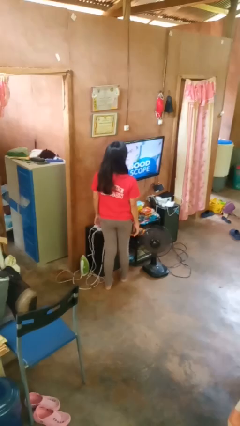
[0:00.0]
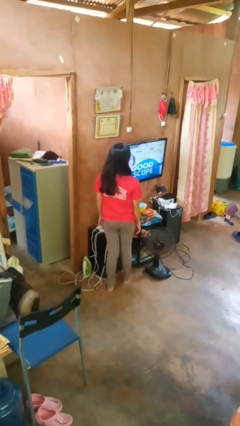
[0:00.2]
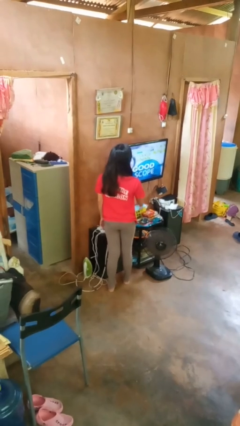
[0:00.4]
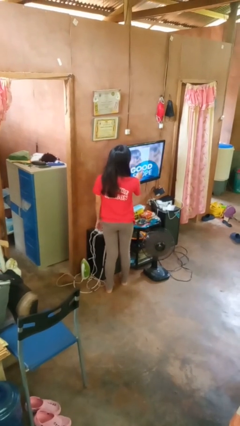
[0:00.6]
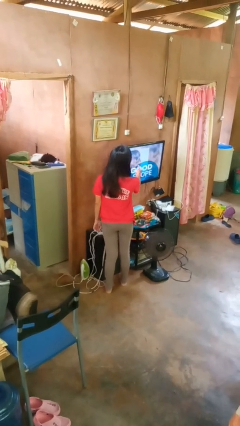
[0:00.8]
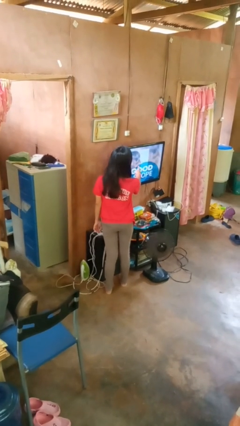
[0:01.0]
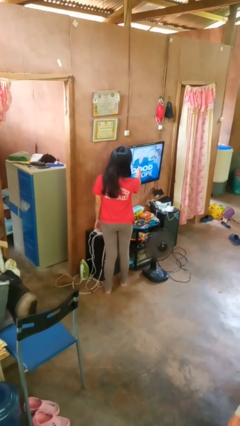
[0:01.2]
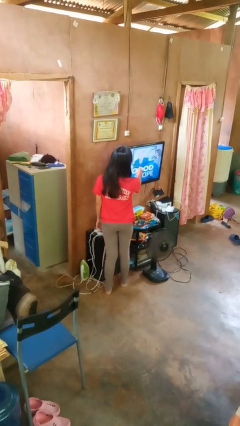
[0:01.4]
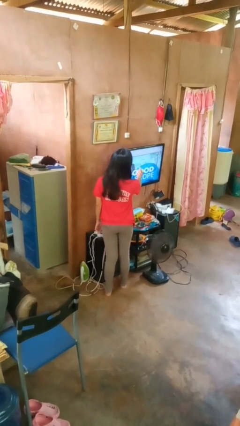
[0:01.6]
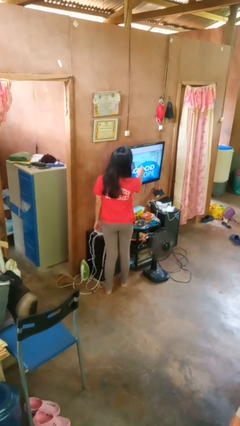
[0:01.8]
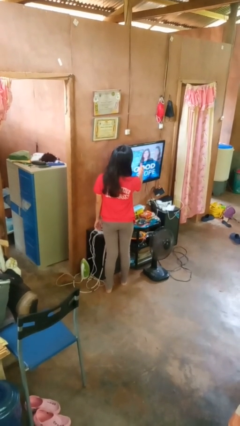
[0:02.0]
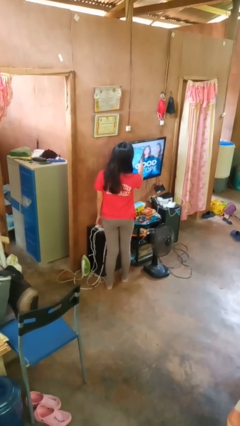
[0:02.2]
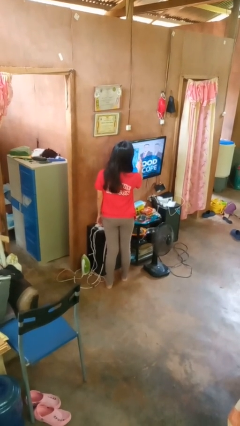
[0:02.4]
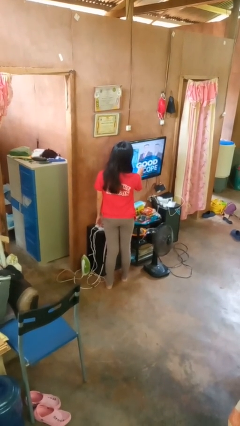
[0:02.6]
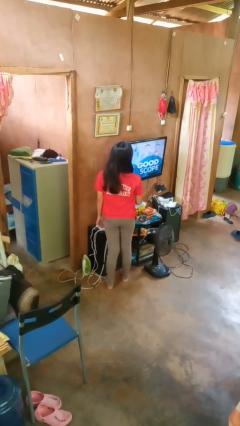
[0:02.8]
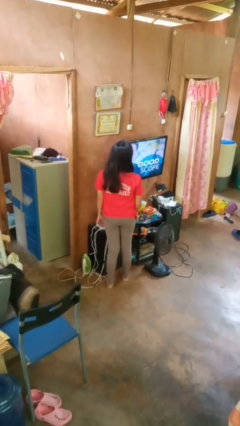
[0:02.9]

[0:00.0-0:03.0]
person taps object with finger

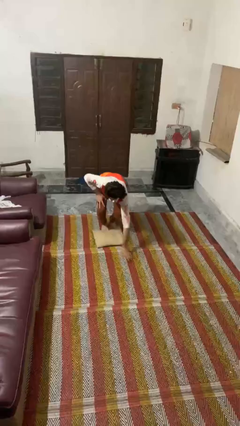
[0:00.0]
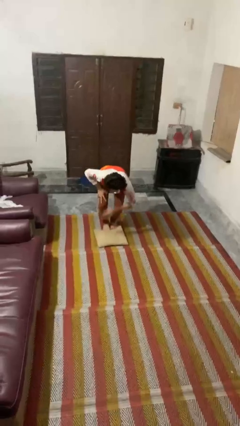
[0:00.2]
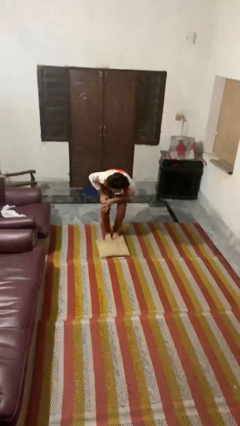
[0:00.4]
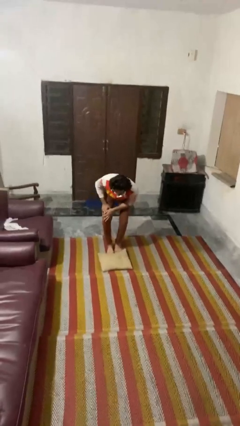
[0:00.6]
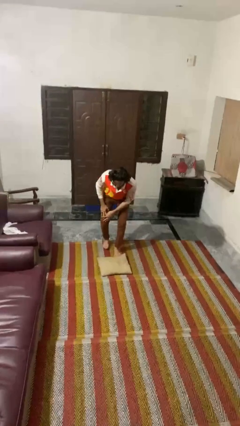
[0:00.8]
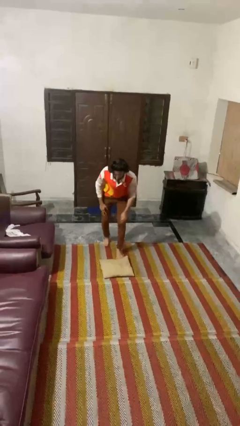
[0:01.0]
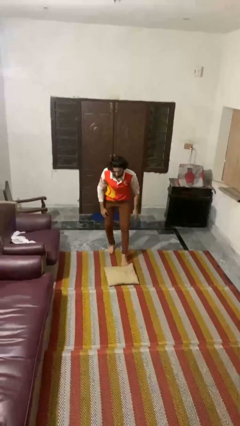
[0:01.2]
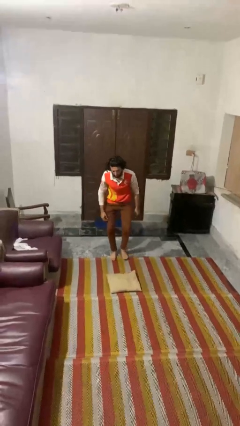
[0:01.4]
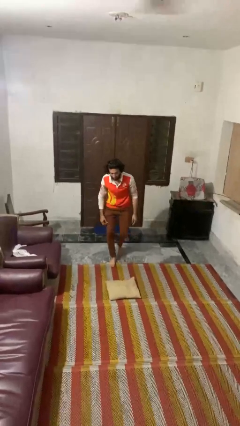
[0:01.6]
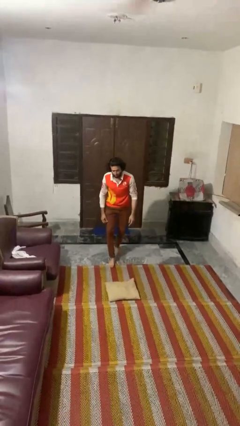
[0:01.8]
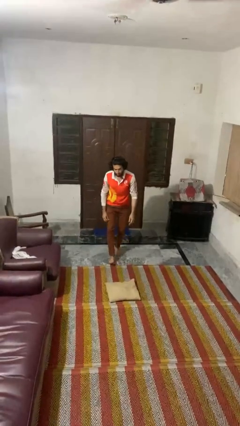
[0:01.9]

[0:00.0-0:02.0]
person stands up from floor

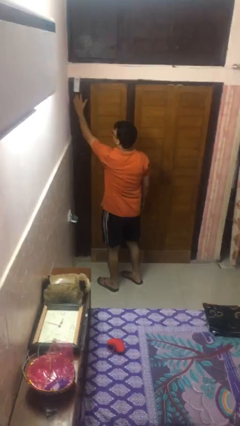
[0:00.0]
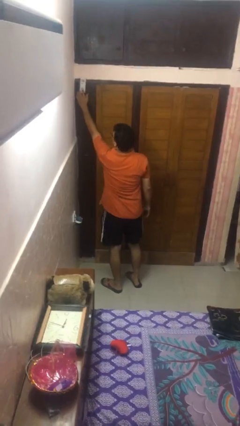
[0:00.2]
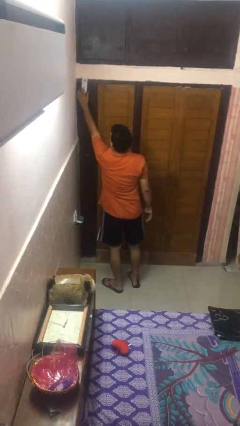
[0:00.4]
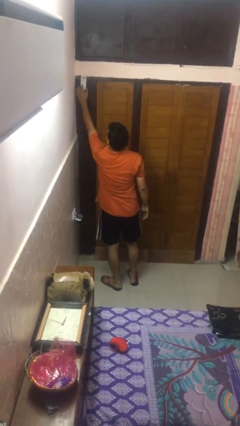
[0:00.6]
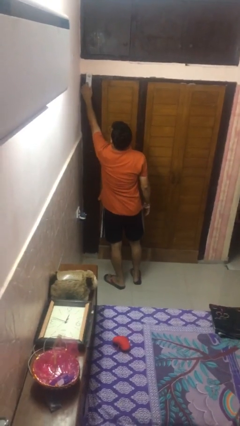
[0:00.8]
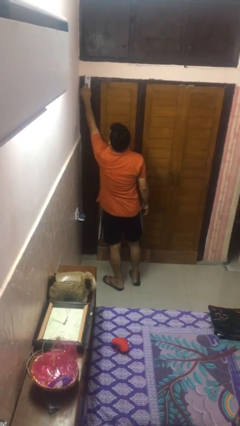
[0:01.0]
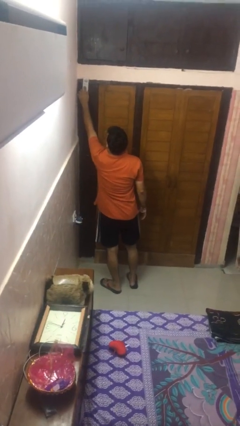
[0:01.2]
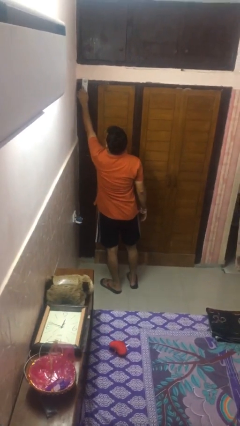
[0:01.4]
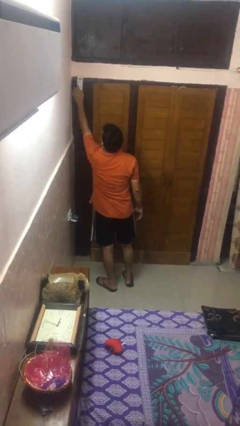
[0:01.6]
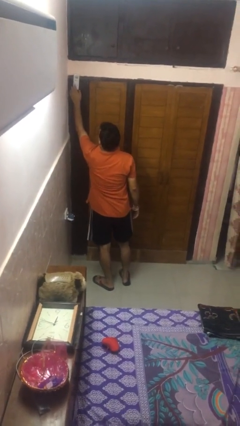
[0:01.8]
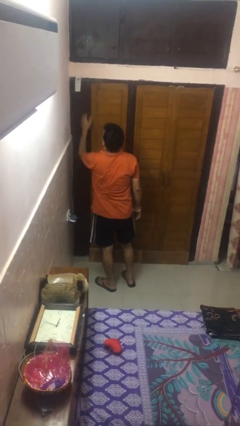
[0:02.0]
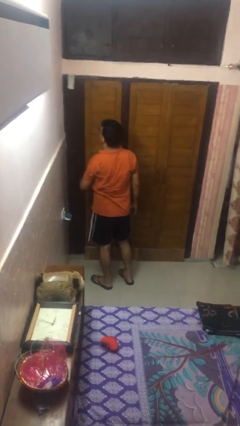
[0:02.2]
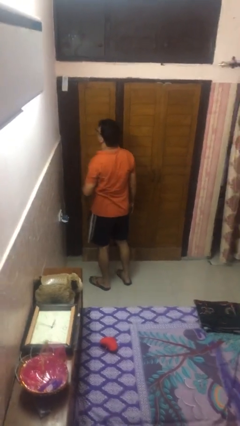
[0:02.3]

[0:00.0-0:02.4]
person adjusts thermostat

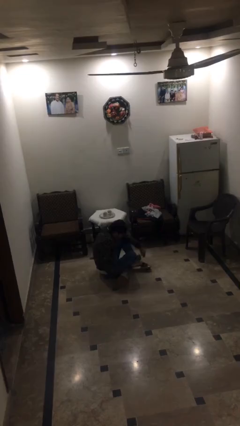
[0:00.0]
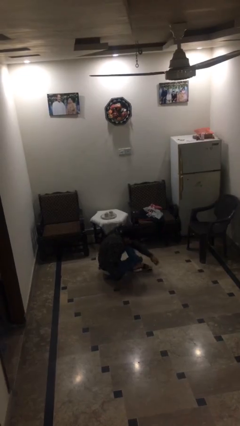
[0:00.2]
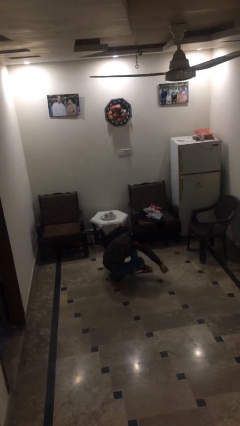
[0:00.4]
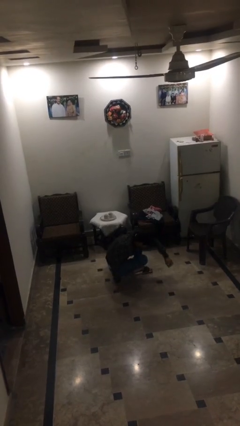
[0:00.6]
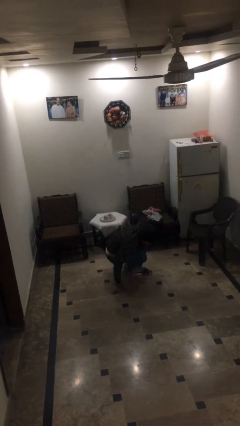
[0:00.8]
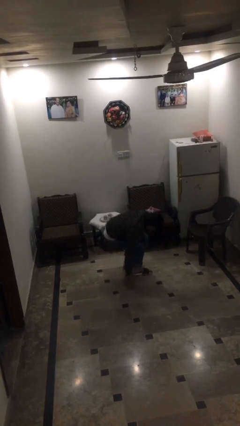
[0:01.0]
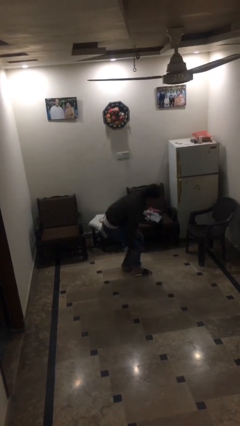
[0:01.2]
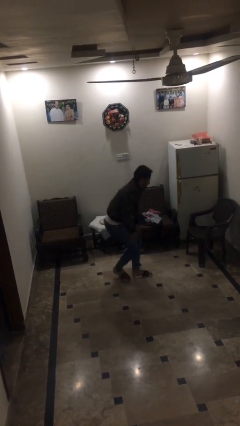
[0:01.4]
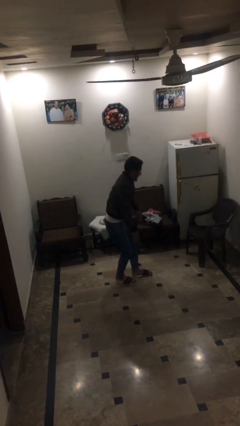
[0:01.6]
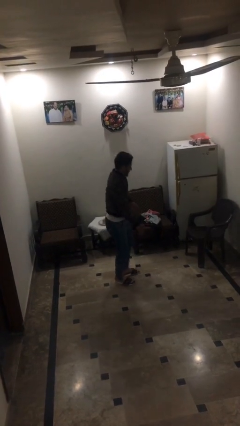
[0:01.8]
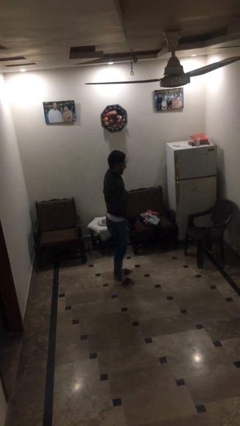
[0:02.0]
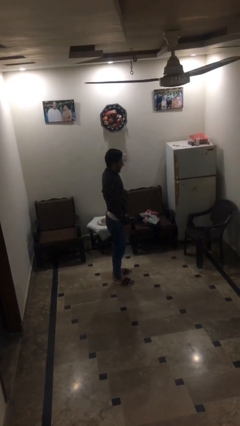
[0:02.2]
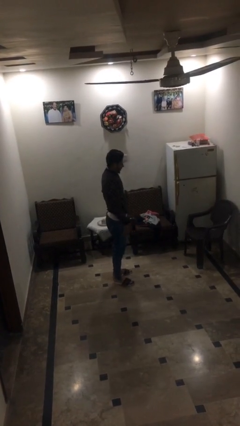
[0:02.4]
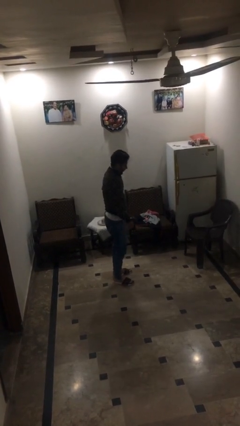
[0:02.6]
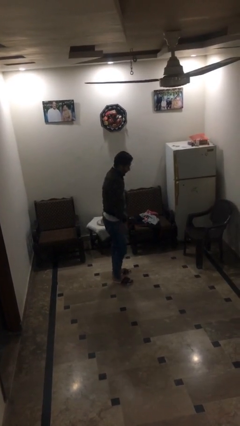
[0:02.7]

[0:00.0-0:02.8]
person stands up

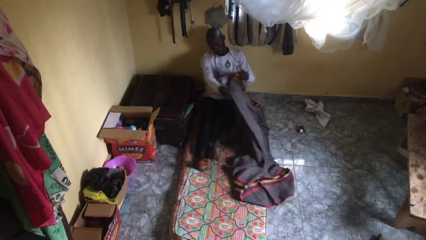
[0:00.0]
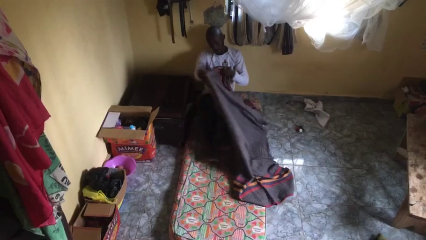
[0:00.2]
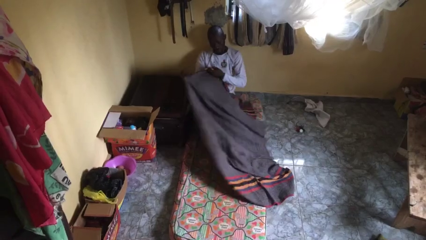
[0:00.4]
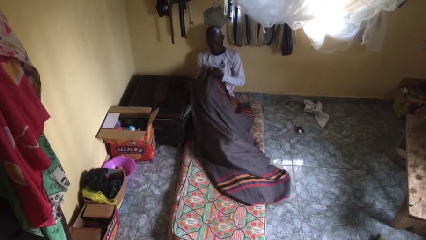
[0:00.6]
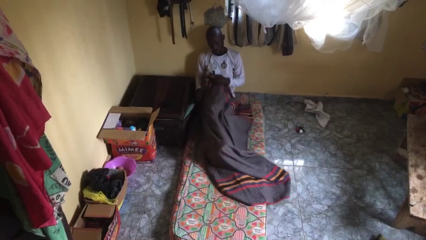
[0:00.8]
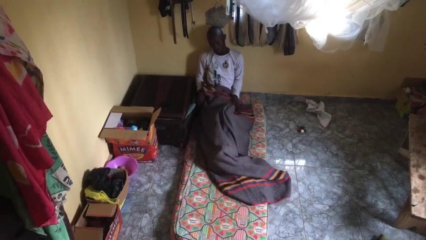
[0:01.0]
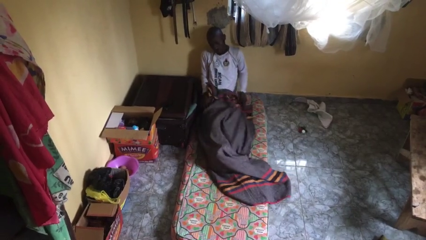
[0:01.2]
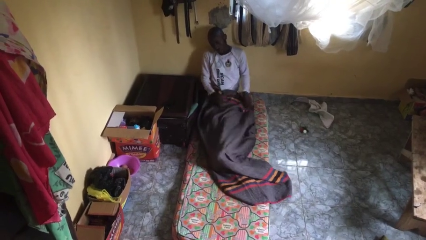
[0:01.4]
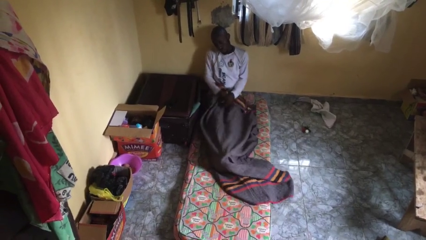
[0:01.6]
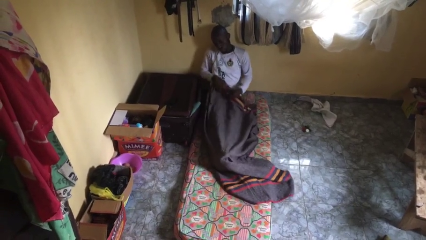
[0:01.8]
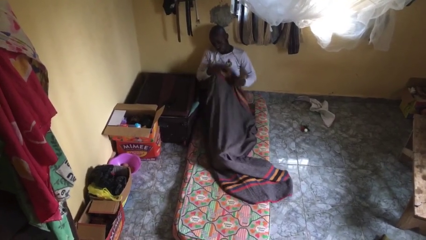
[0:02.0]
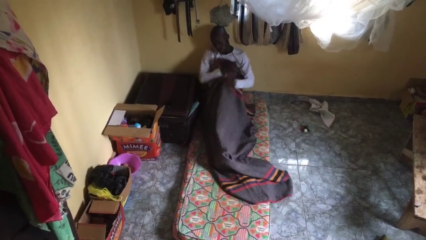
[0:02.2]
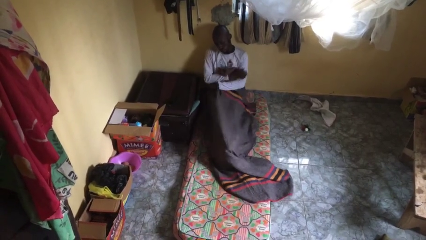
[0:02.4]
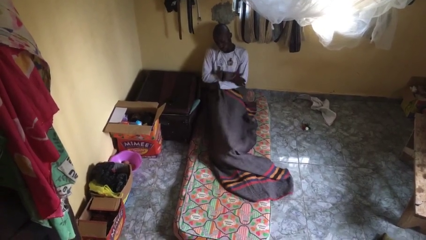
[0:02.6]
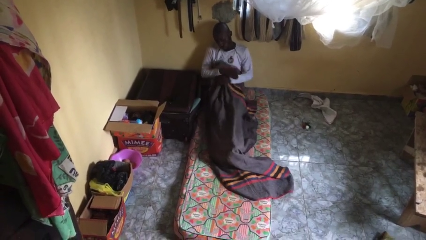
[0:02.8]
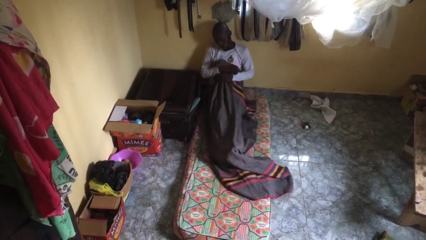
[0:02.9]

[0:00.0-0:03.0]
person covers with blanket

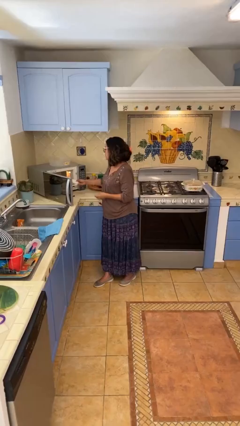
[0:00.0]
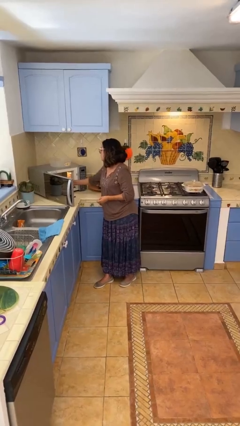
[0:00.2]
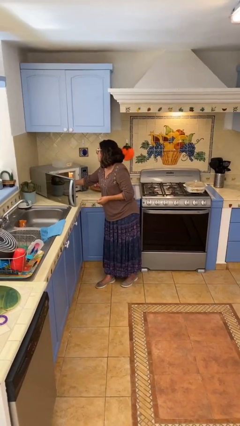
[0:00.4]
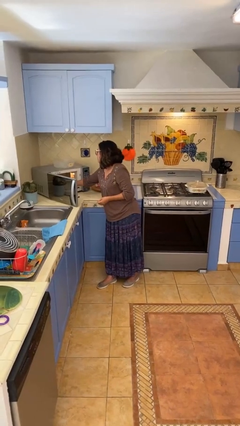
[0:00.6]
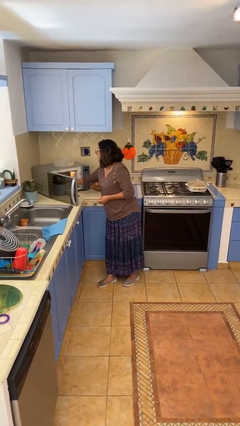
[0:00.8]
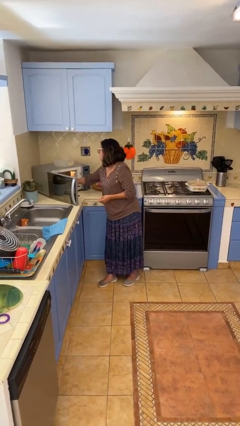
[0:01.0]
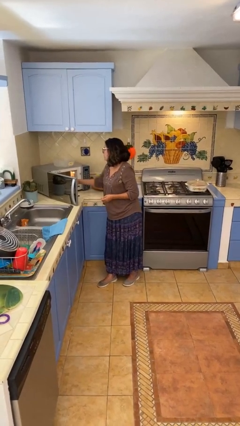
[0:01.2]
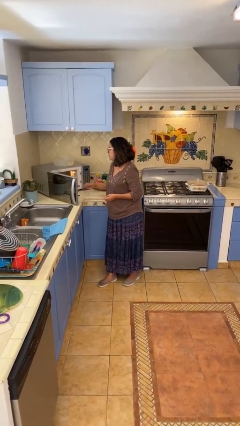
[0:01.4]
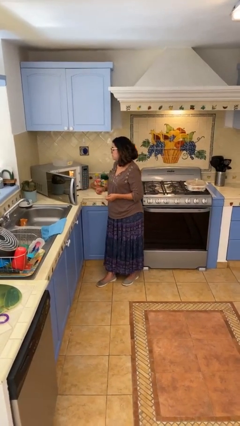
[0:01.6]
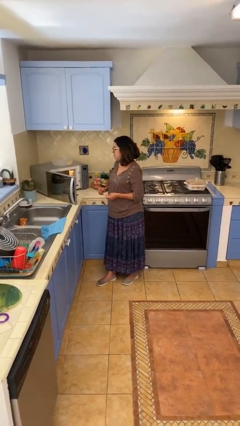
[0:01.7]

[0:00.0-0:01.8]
person puts object into microwave

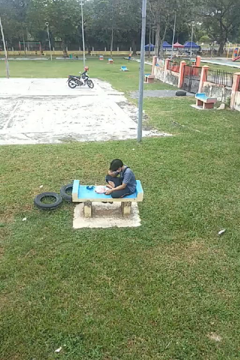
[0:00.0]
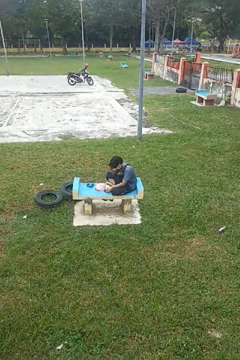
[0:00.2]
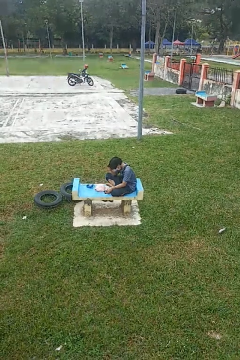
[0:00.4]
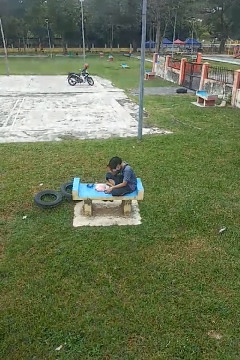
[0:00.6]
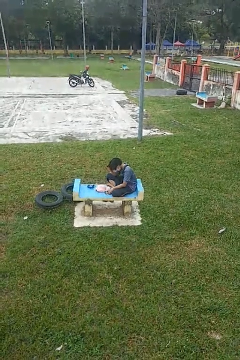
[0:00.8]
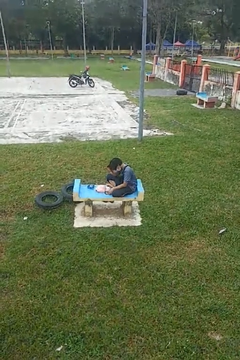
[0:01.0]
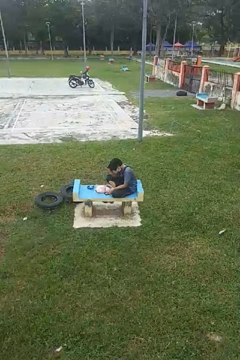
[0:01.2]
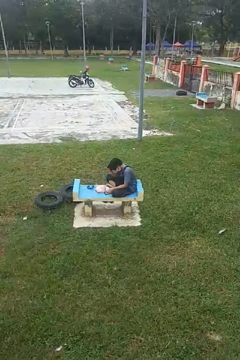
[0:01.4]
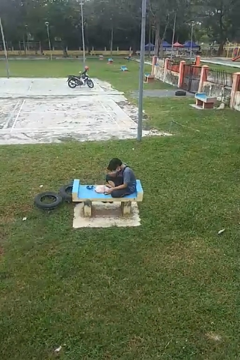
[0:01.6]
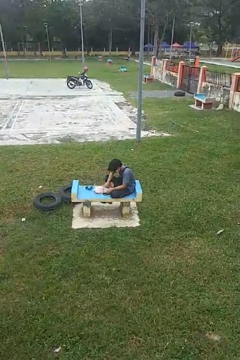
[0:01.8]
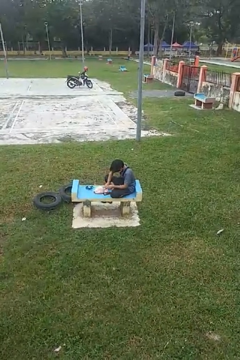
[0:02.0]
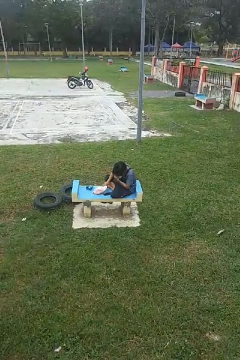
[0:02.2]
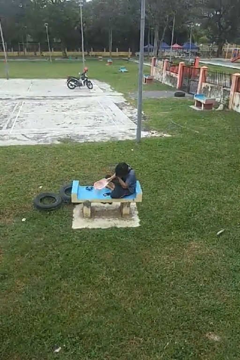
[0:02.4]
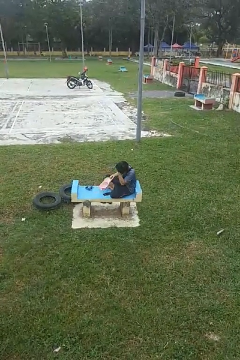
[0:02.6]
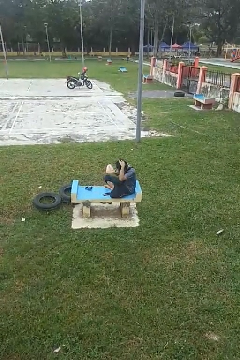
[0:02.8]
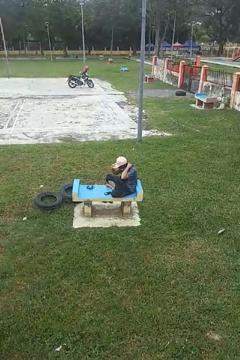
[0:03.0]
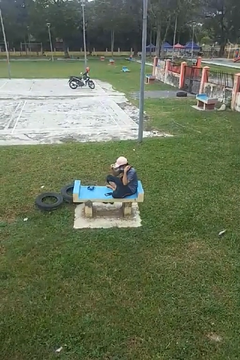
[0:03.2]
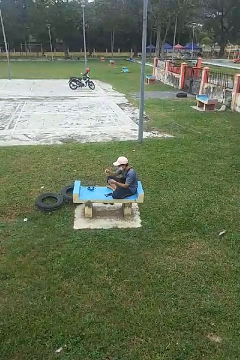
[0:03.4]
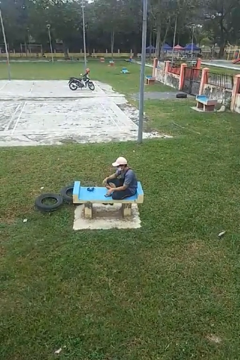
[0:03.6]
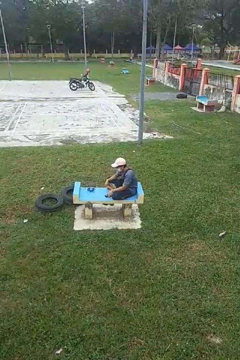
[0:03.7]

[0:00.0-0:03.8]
person puts on hat
